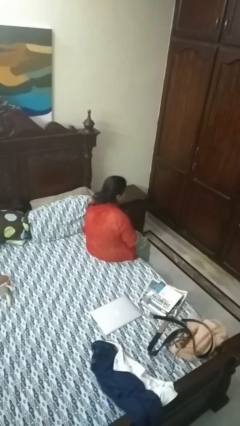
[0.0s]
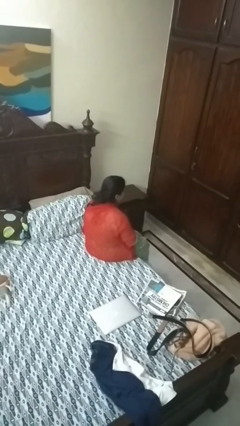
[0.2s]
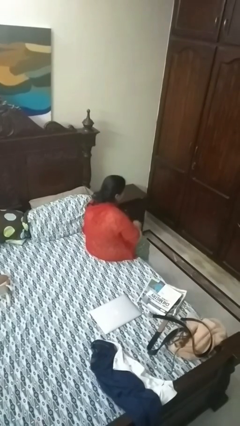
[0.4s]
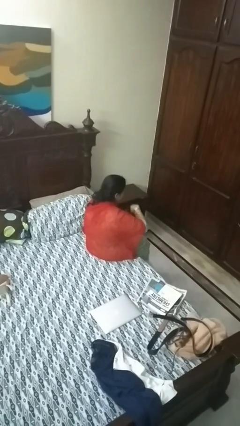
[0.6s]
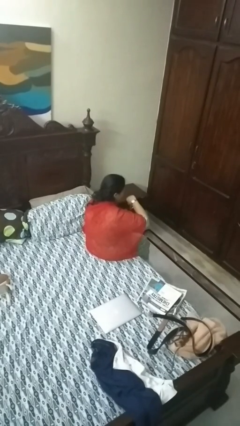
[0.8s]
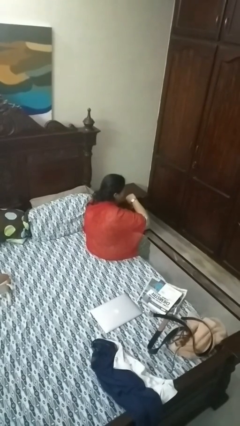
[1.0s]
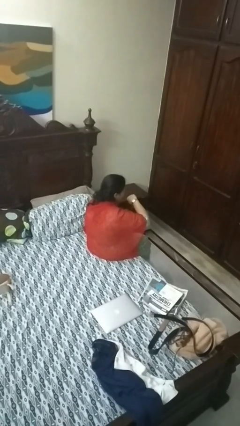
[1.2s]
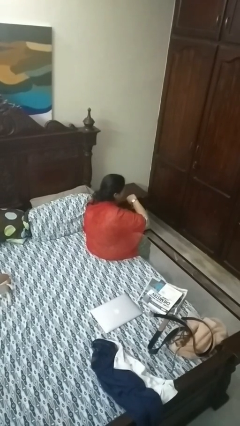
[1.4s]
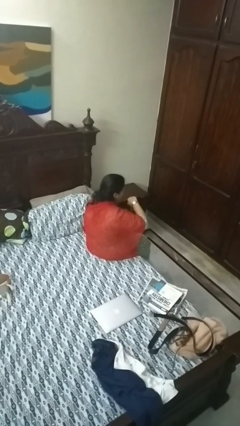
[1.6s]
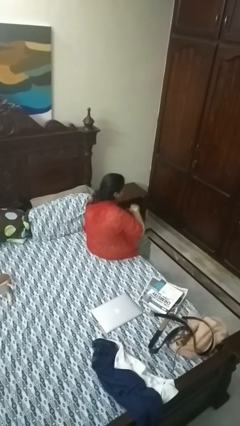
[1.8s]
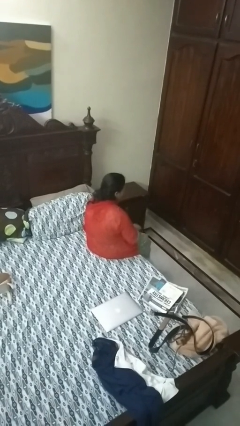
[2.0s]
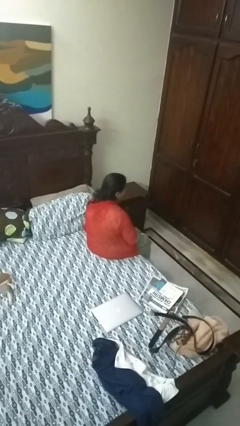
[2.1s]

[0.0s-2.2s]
person looks at wristwatch

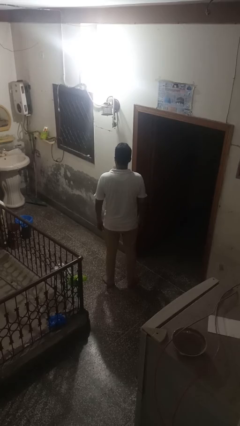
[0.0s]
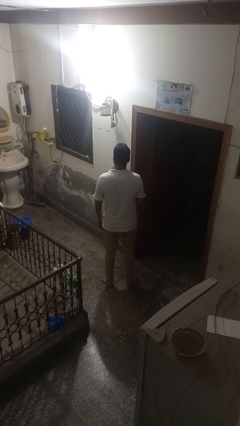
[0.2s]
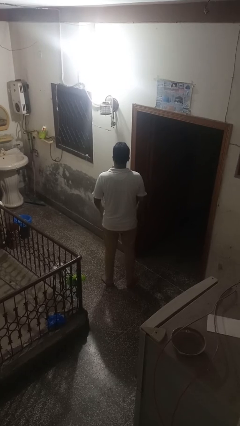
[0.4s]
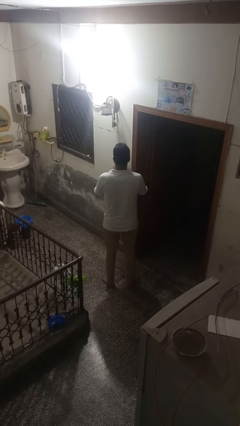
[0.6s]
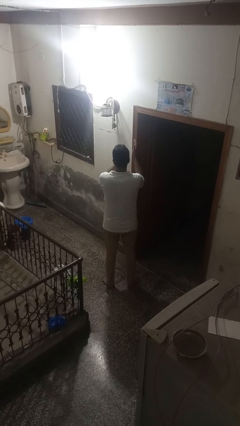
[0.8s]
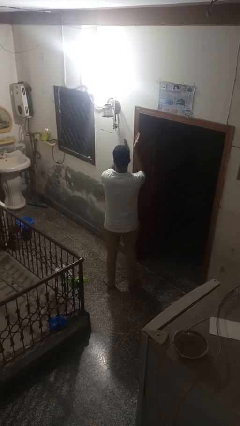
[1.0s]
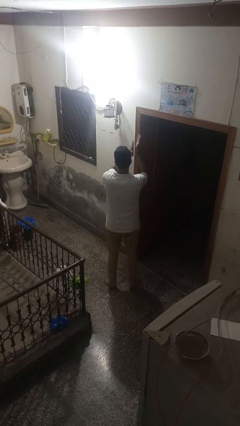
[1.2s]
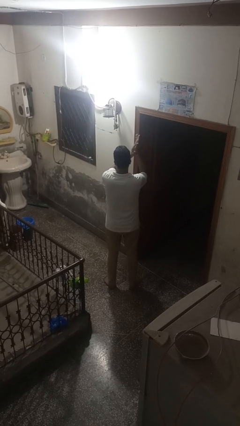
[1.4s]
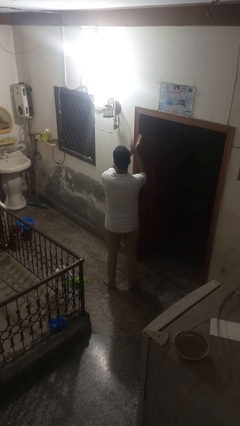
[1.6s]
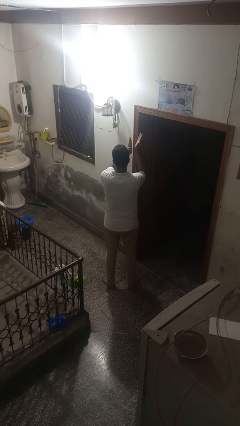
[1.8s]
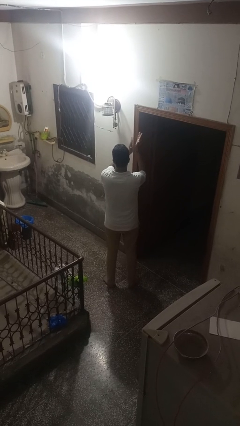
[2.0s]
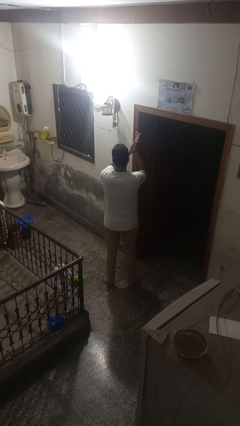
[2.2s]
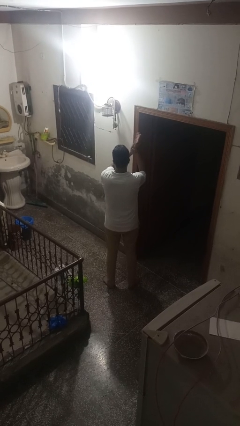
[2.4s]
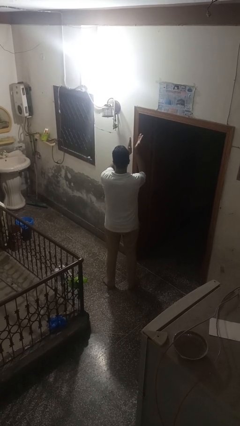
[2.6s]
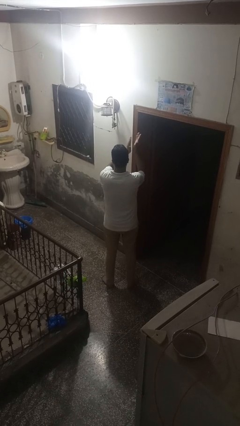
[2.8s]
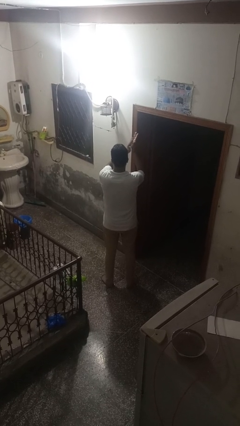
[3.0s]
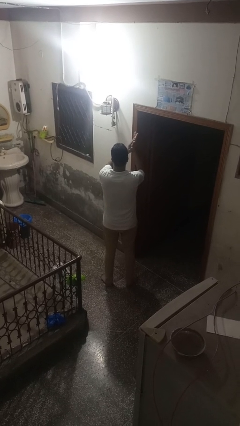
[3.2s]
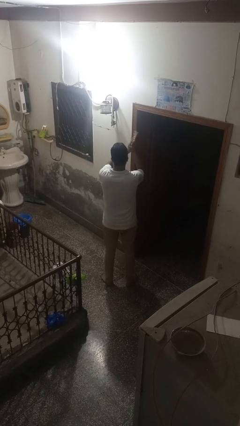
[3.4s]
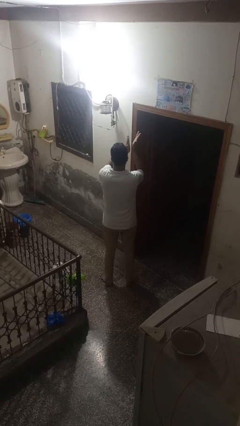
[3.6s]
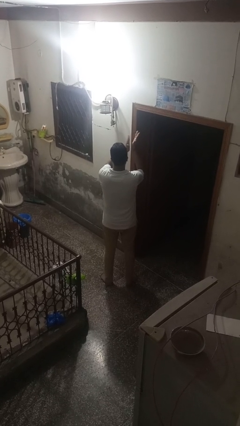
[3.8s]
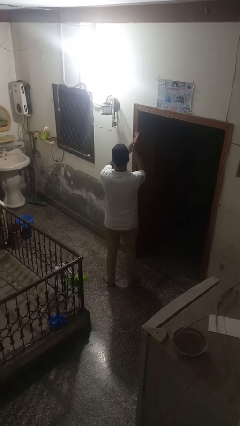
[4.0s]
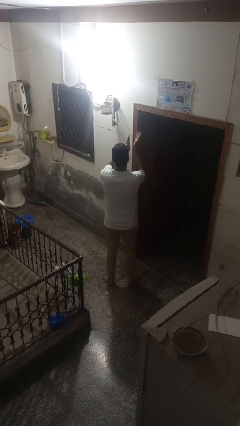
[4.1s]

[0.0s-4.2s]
person claps hands

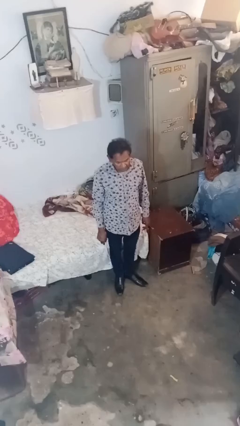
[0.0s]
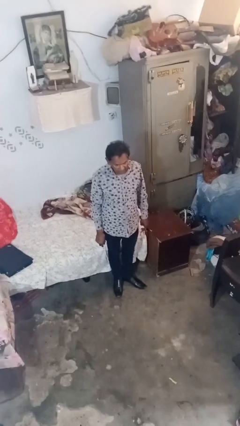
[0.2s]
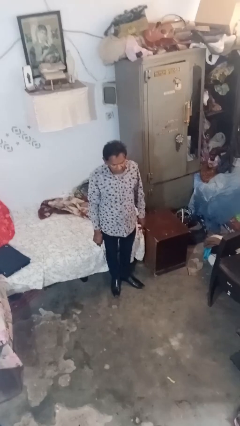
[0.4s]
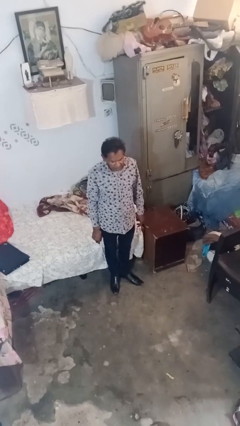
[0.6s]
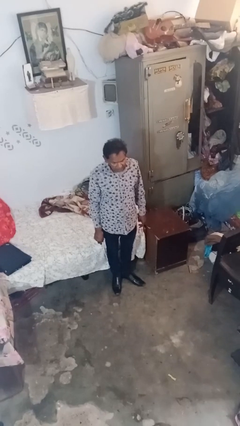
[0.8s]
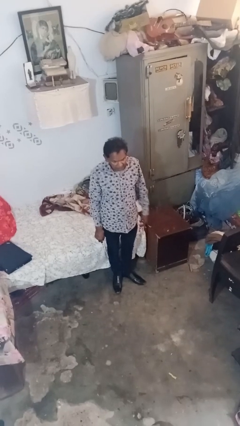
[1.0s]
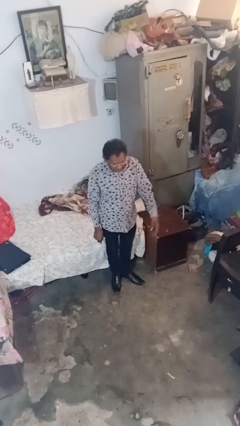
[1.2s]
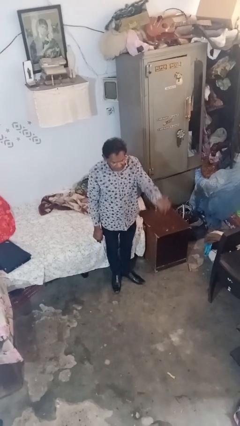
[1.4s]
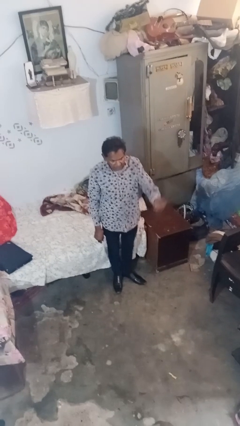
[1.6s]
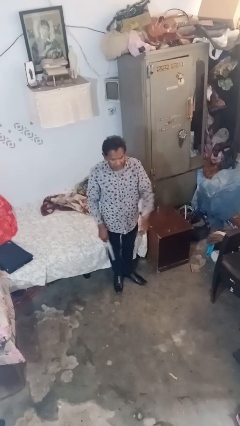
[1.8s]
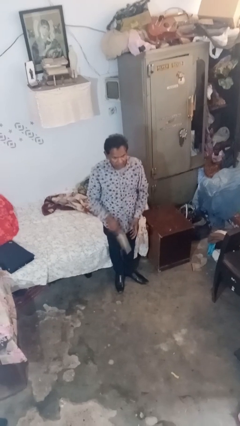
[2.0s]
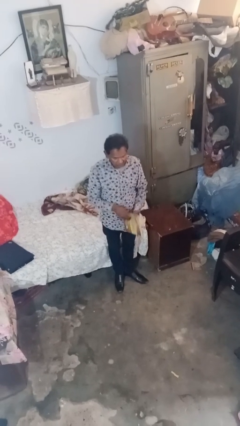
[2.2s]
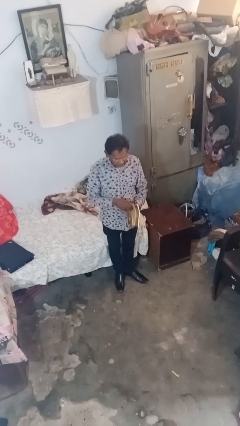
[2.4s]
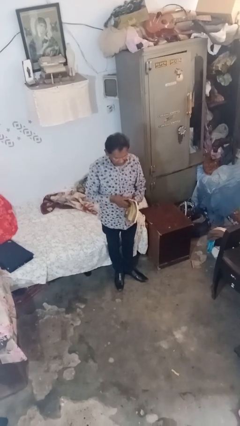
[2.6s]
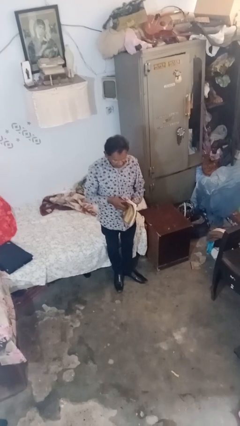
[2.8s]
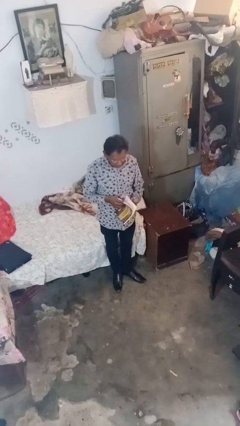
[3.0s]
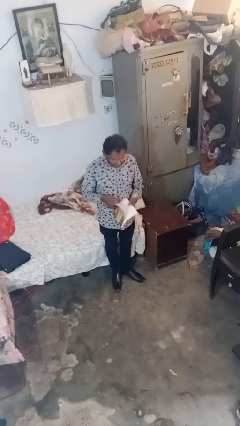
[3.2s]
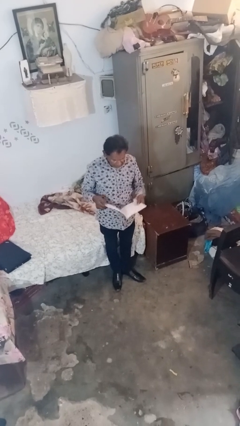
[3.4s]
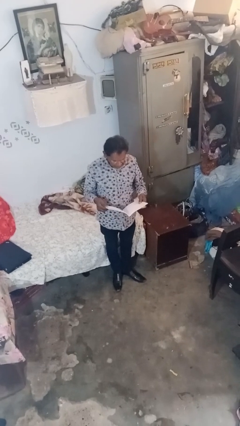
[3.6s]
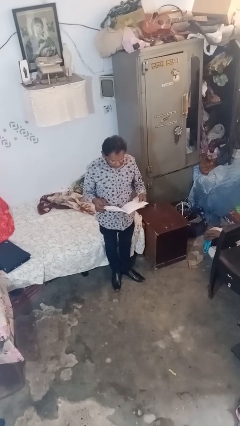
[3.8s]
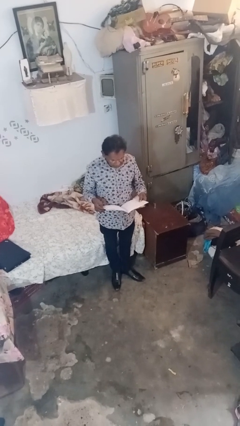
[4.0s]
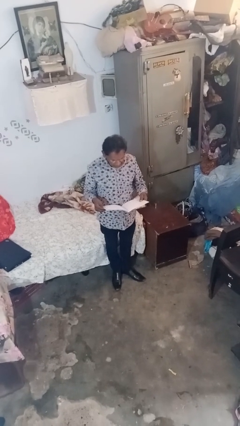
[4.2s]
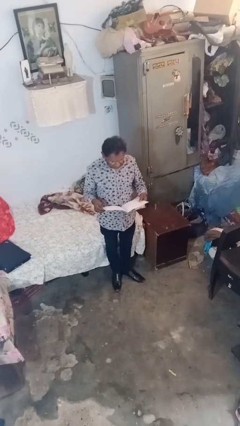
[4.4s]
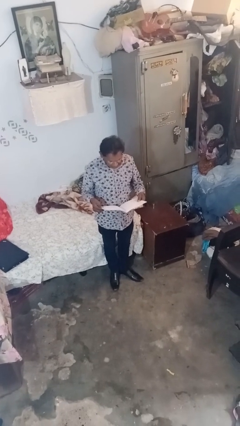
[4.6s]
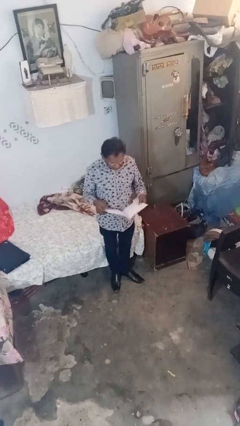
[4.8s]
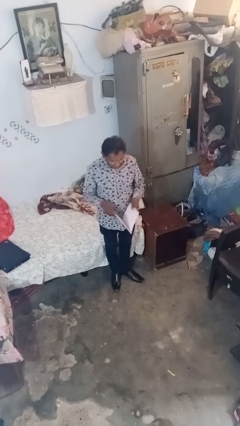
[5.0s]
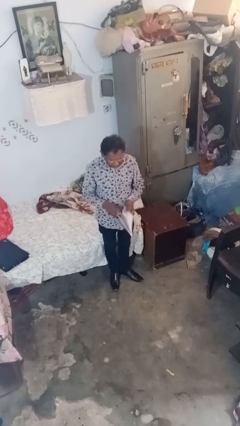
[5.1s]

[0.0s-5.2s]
person reads document

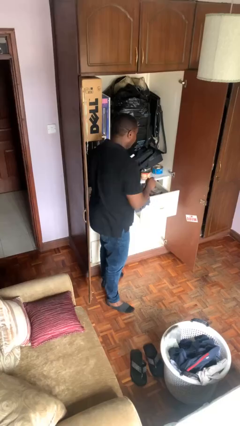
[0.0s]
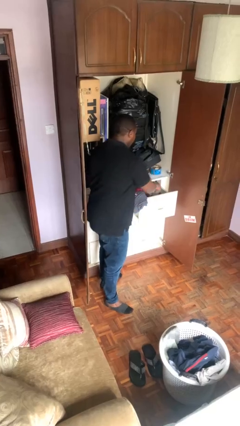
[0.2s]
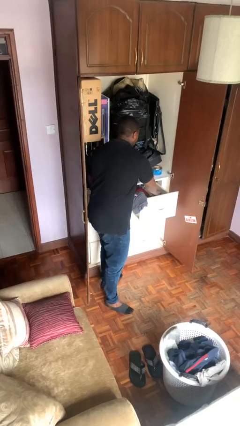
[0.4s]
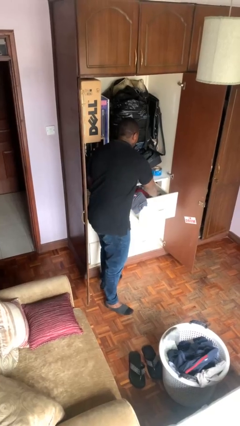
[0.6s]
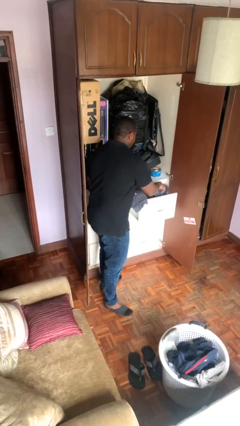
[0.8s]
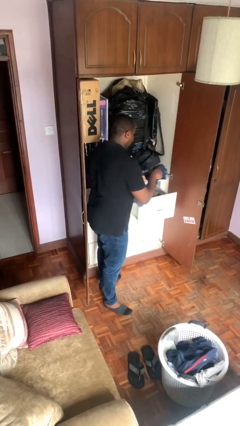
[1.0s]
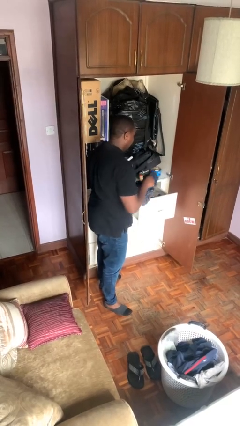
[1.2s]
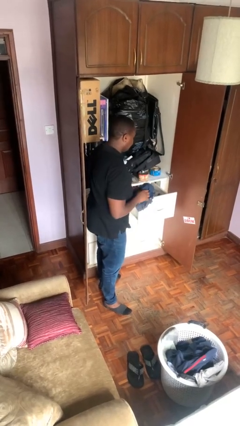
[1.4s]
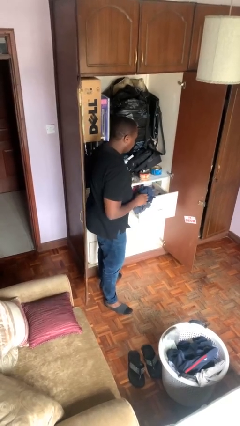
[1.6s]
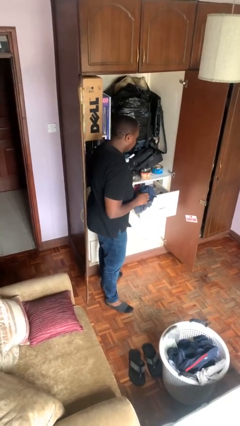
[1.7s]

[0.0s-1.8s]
person takes clothes from dresser

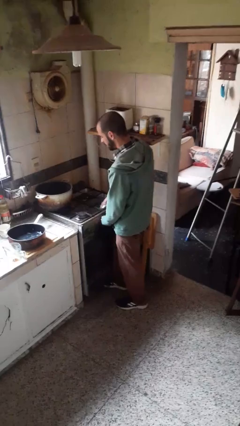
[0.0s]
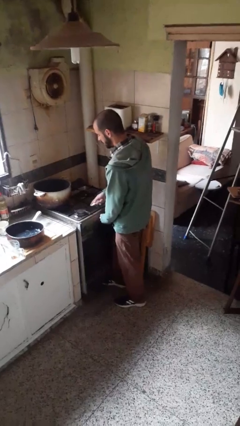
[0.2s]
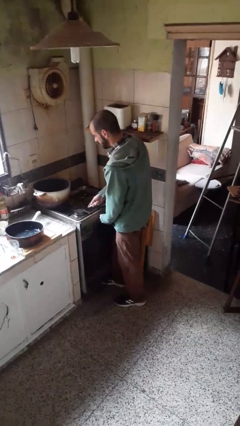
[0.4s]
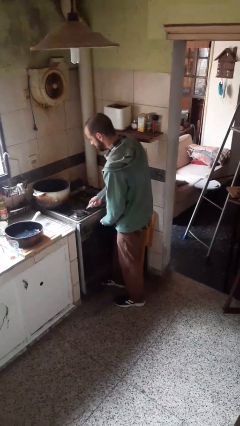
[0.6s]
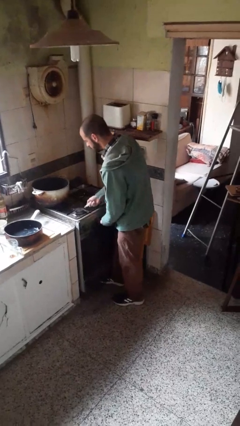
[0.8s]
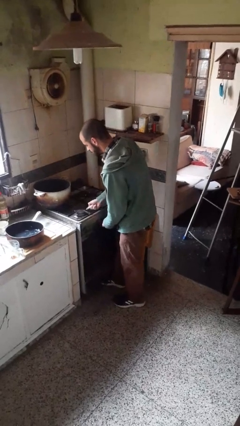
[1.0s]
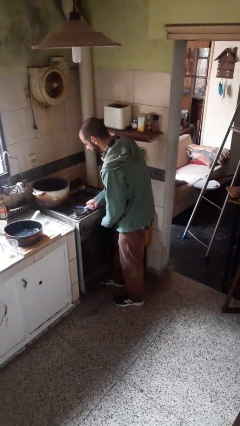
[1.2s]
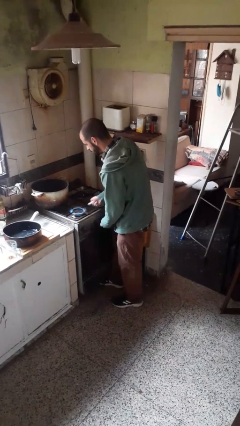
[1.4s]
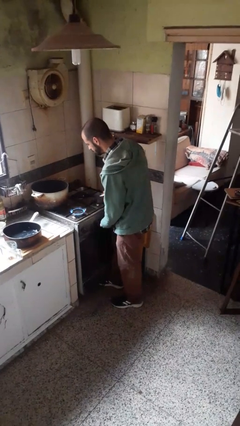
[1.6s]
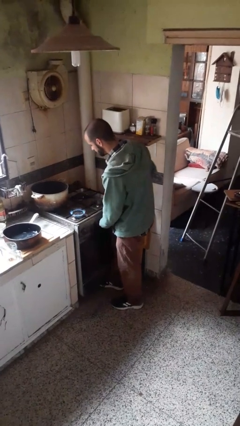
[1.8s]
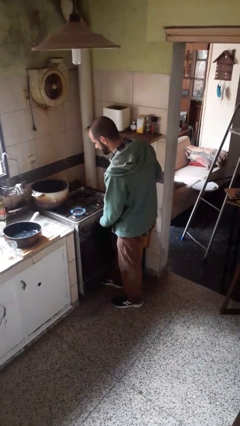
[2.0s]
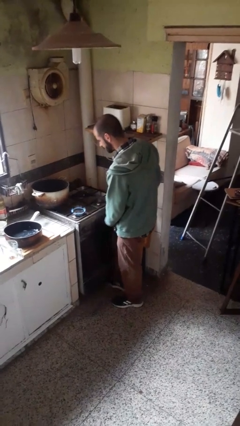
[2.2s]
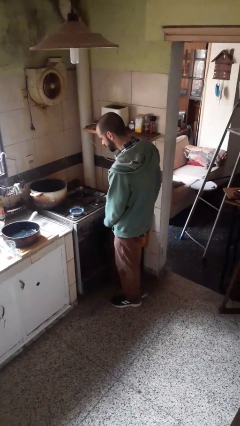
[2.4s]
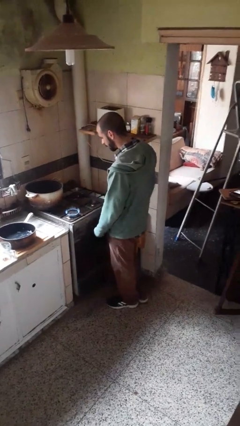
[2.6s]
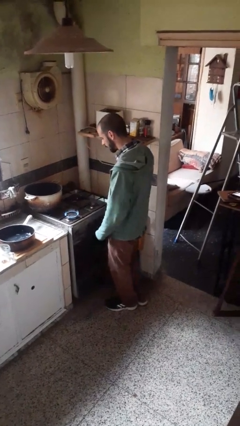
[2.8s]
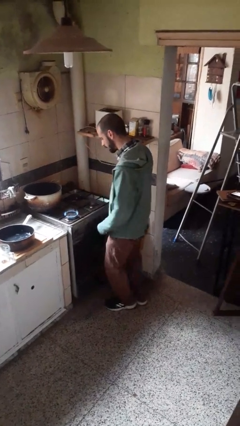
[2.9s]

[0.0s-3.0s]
person turns on stovetop

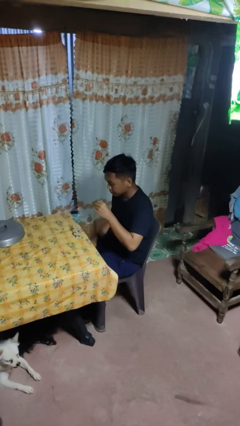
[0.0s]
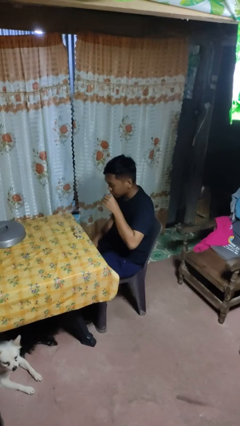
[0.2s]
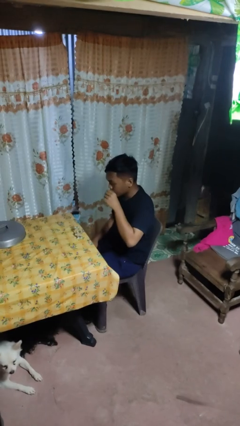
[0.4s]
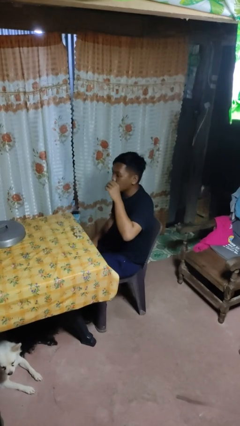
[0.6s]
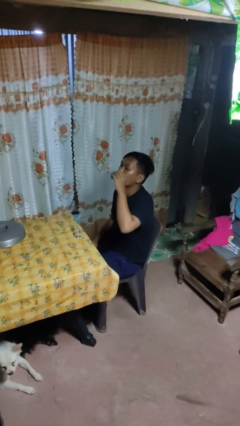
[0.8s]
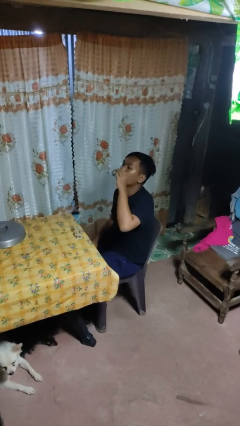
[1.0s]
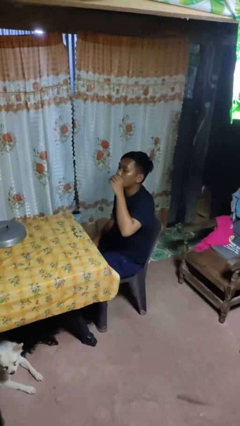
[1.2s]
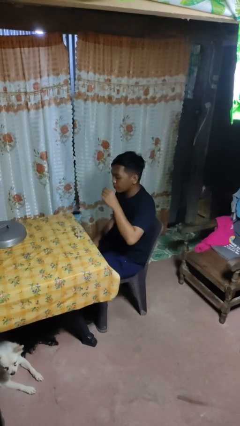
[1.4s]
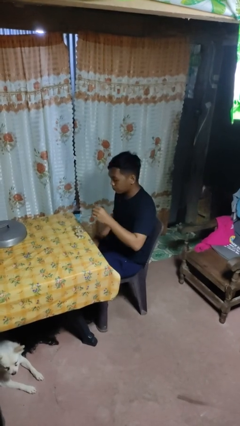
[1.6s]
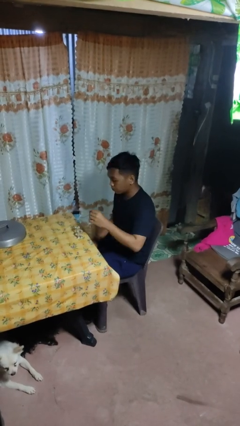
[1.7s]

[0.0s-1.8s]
person drinks from shotglass
